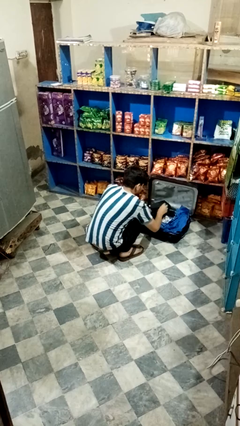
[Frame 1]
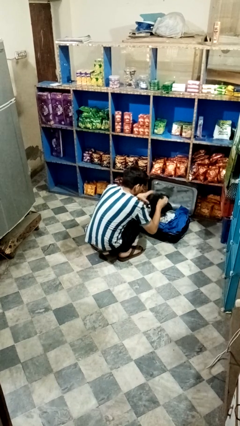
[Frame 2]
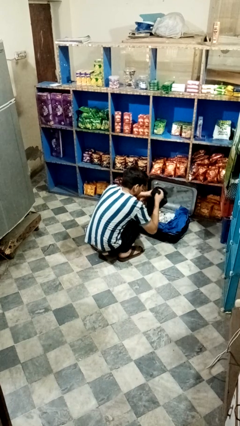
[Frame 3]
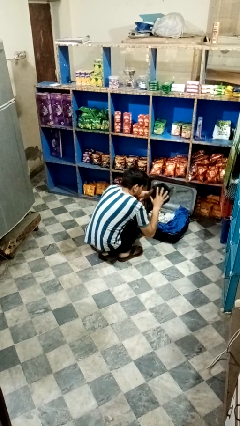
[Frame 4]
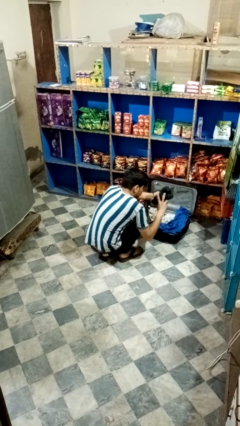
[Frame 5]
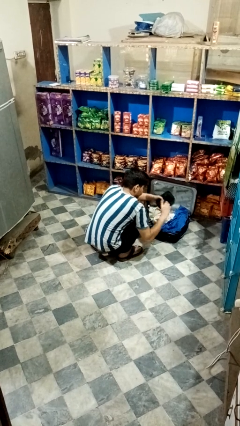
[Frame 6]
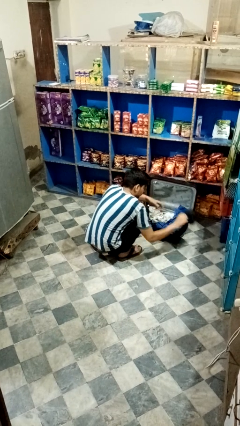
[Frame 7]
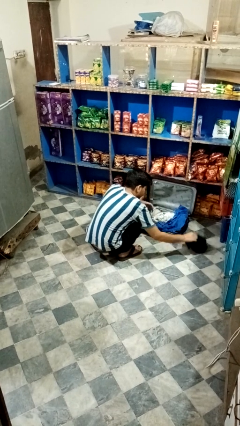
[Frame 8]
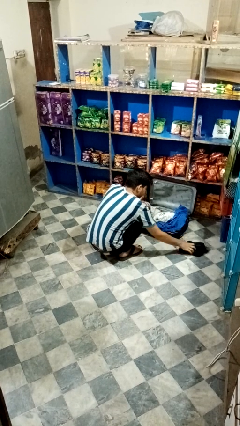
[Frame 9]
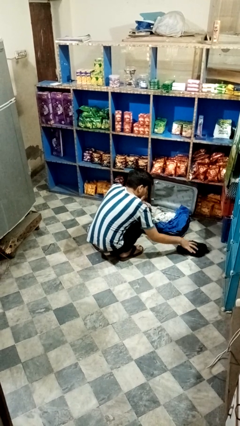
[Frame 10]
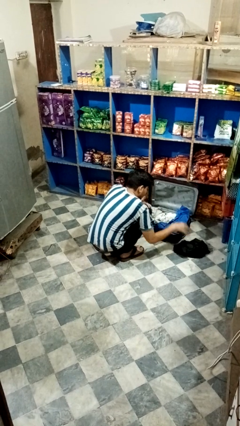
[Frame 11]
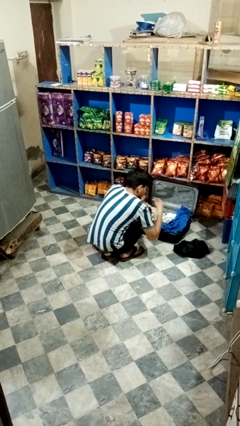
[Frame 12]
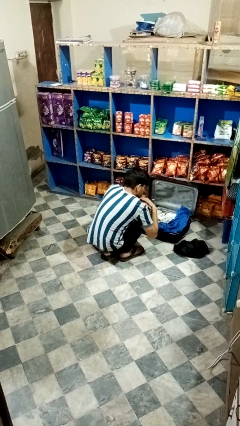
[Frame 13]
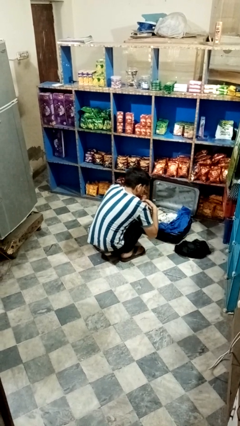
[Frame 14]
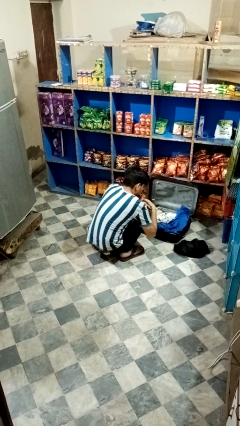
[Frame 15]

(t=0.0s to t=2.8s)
person unloads clothes from suitcase

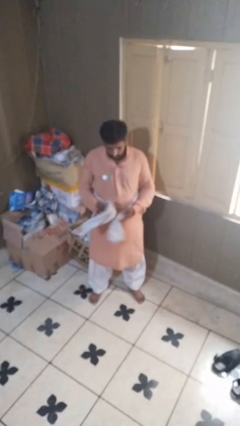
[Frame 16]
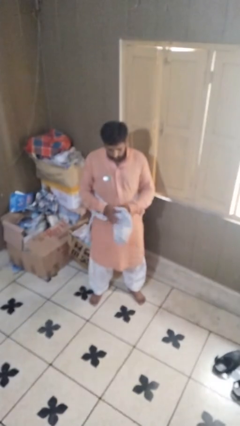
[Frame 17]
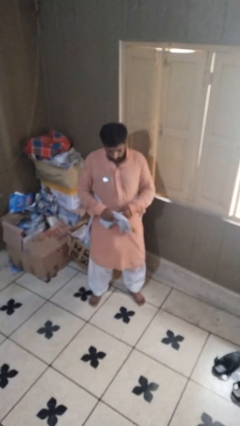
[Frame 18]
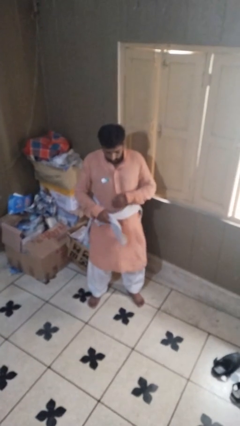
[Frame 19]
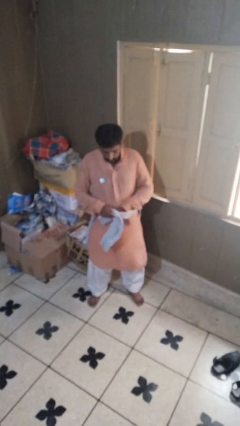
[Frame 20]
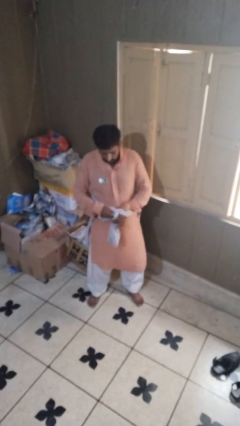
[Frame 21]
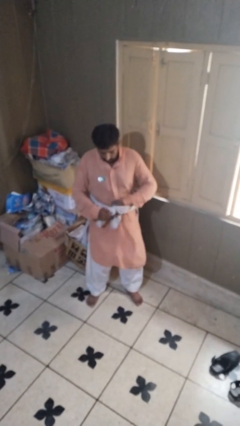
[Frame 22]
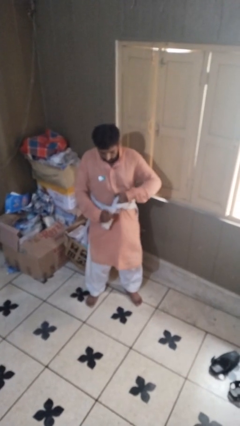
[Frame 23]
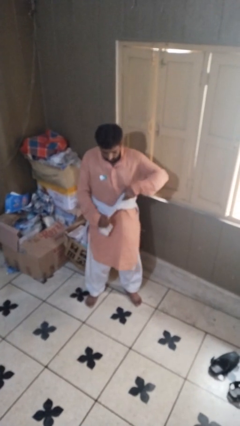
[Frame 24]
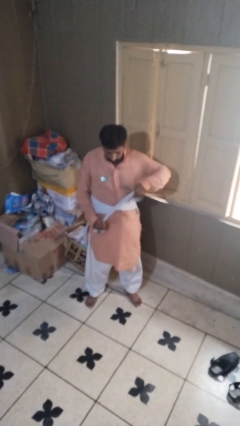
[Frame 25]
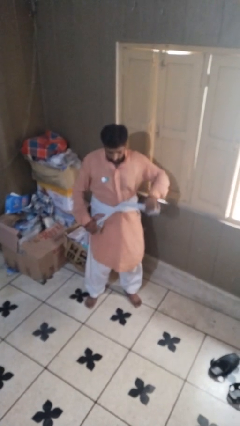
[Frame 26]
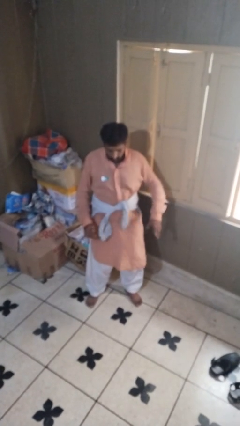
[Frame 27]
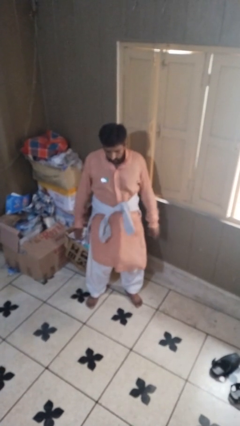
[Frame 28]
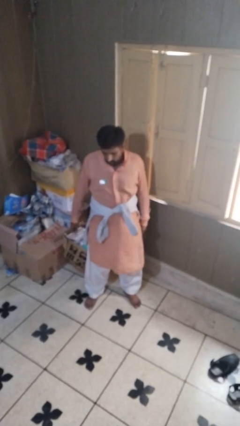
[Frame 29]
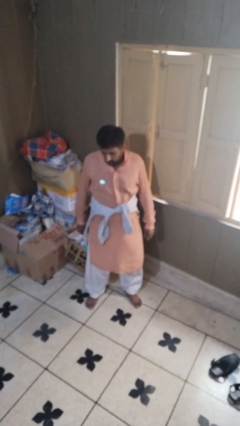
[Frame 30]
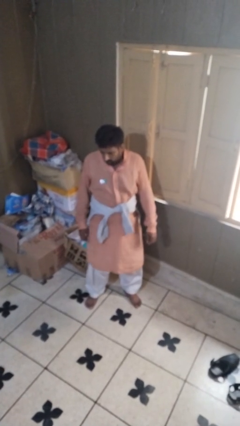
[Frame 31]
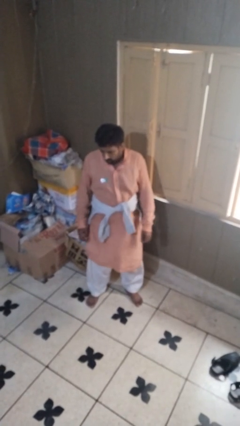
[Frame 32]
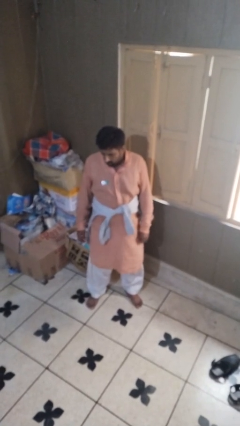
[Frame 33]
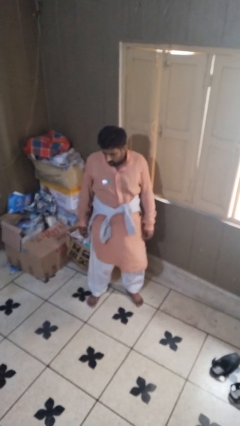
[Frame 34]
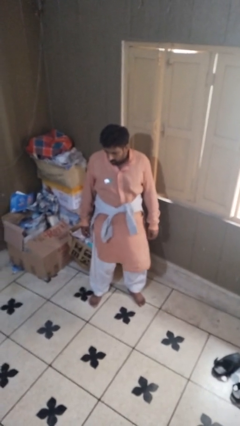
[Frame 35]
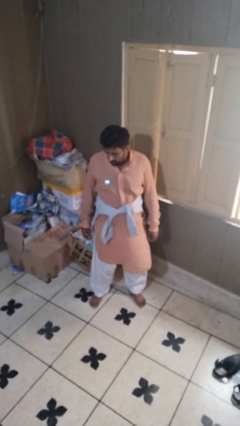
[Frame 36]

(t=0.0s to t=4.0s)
person ties jacket around waist

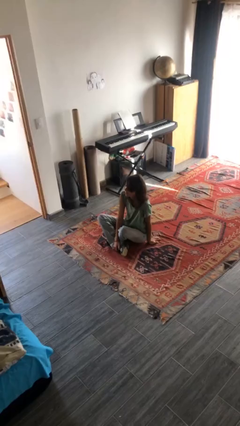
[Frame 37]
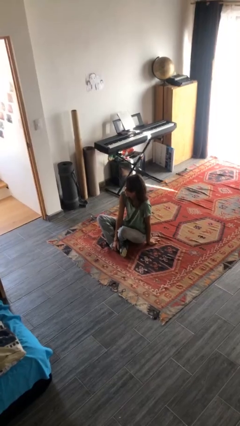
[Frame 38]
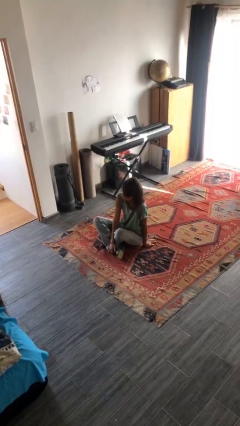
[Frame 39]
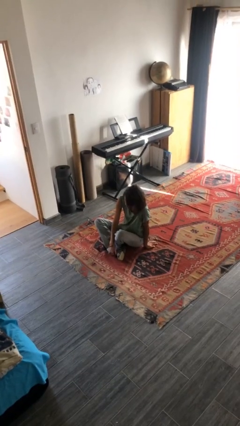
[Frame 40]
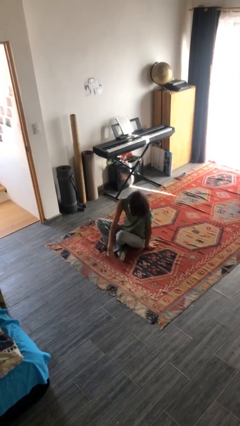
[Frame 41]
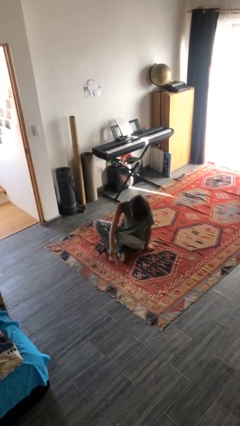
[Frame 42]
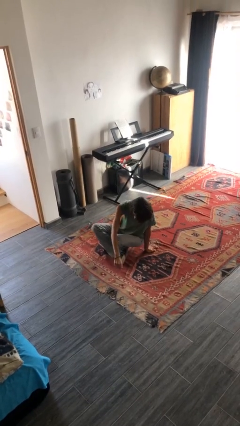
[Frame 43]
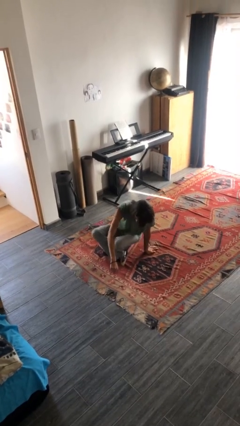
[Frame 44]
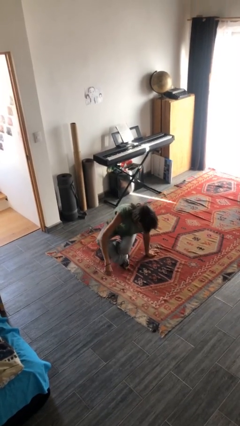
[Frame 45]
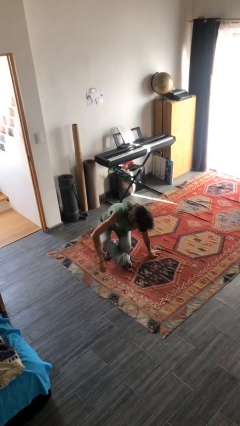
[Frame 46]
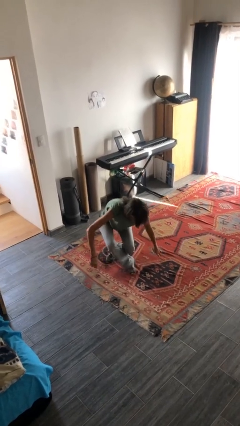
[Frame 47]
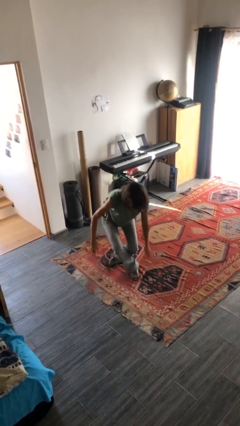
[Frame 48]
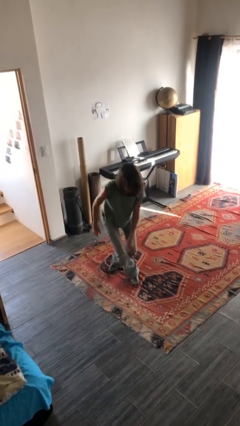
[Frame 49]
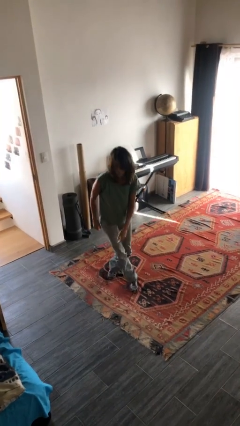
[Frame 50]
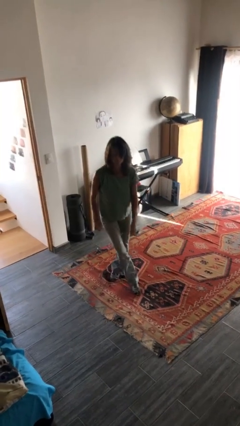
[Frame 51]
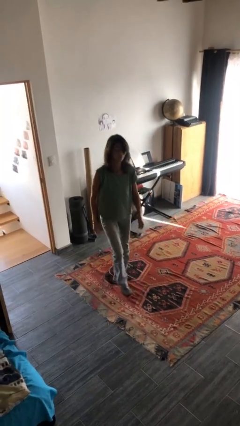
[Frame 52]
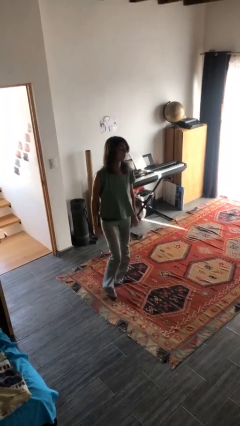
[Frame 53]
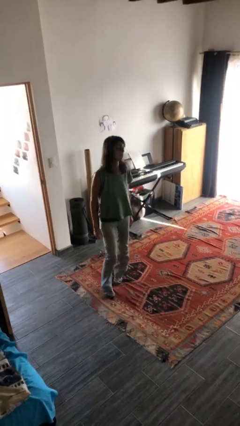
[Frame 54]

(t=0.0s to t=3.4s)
person stands up from floor

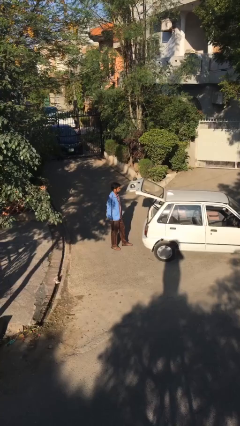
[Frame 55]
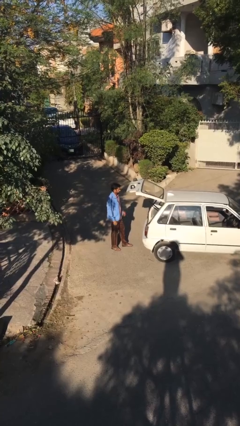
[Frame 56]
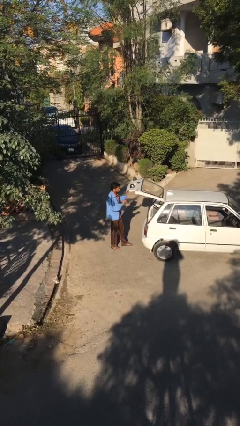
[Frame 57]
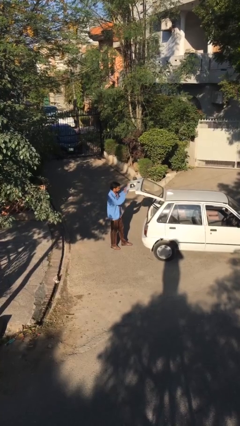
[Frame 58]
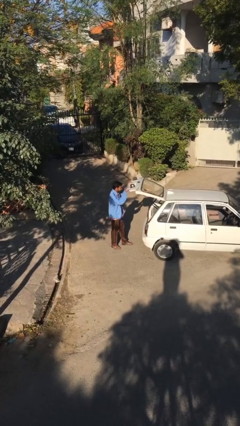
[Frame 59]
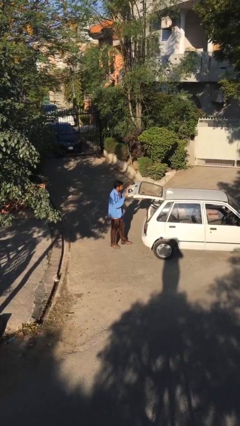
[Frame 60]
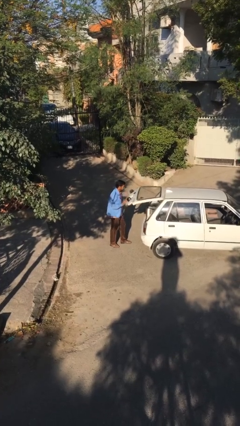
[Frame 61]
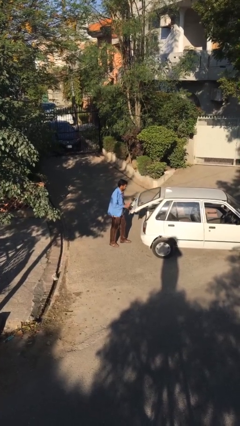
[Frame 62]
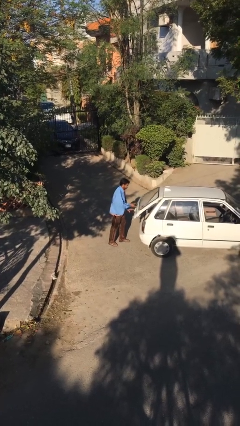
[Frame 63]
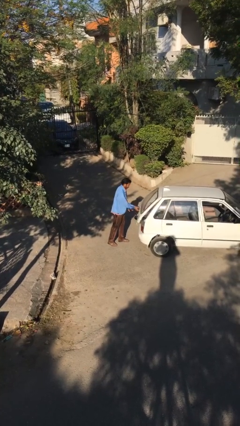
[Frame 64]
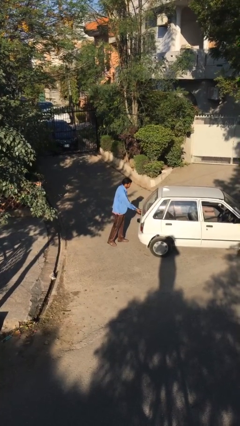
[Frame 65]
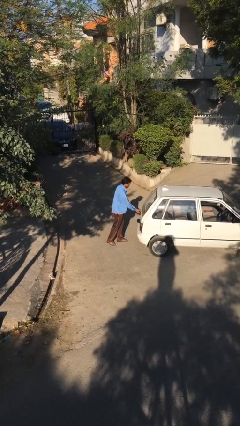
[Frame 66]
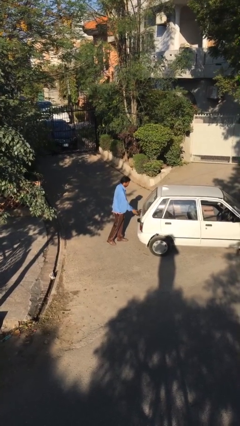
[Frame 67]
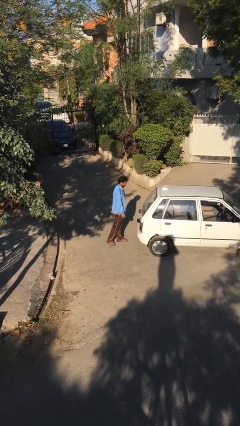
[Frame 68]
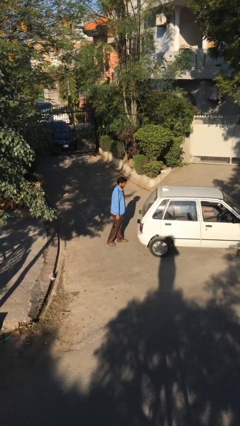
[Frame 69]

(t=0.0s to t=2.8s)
person closes car trunk

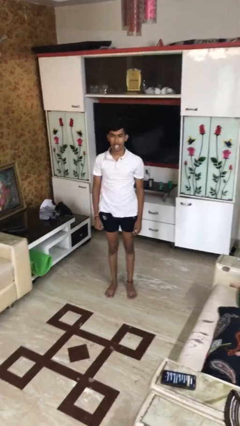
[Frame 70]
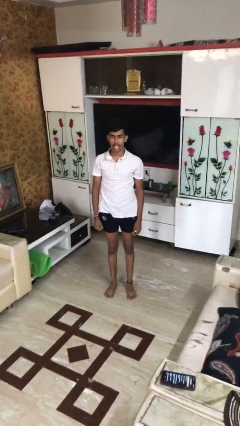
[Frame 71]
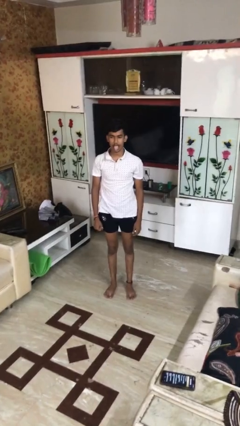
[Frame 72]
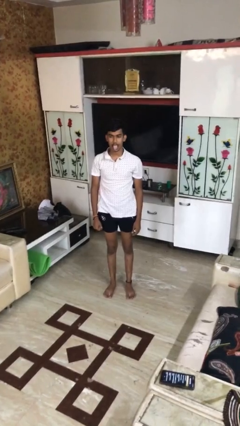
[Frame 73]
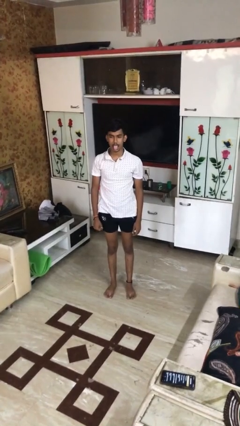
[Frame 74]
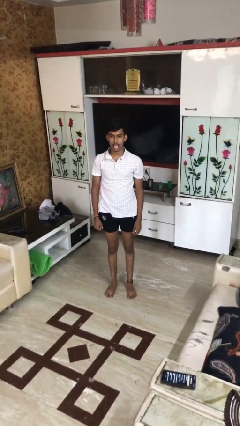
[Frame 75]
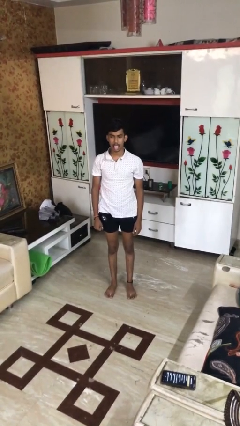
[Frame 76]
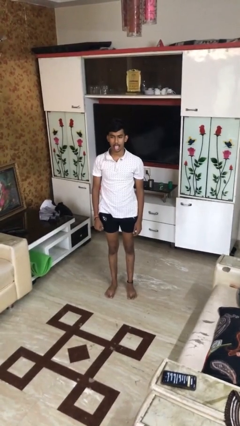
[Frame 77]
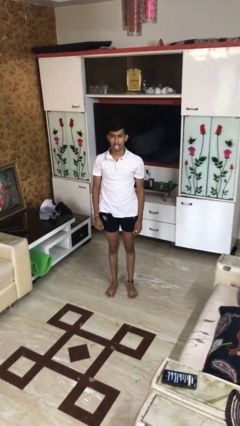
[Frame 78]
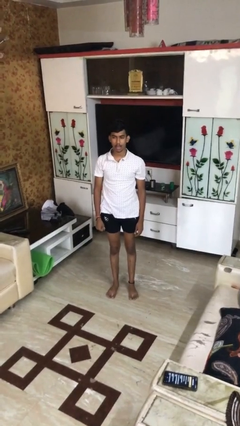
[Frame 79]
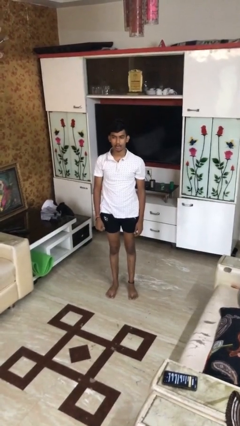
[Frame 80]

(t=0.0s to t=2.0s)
person sticks out tongue

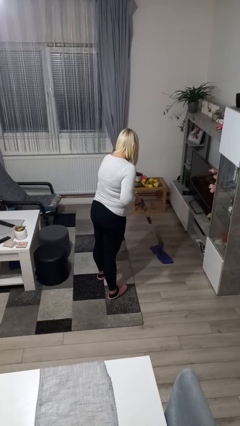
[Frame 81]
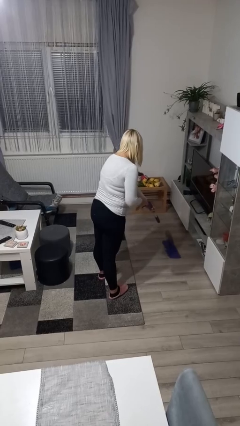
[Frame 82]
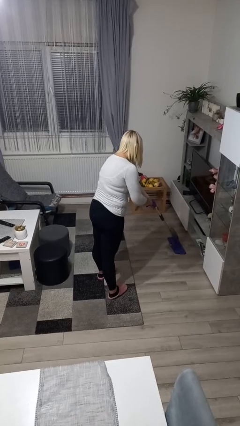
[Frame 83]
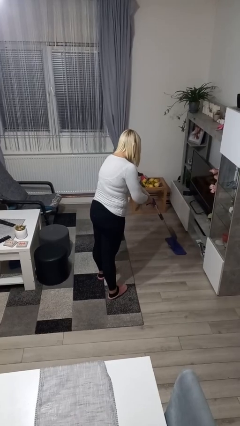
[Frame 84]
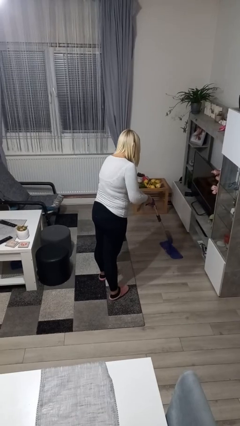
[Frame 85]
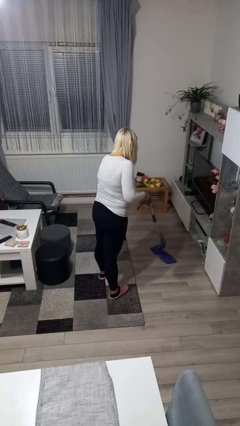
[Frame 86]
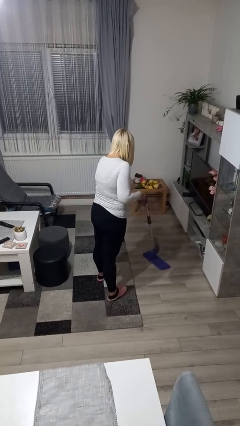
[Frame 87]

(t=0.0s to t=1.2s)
person mops

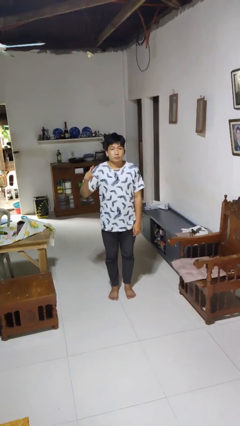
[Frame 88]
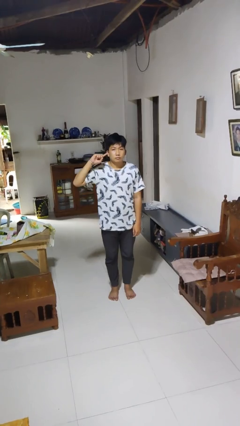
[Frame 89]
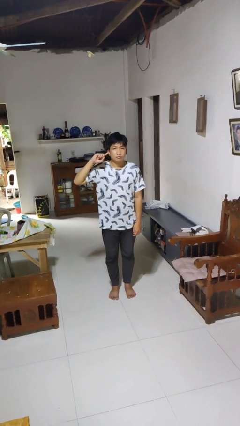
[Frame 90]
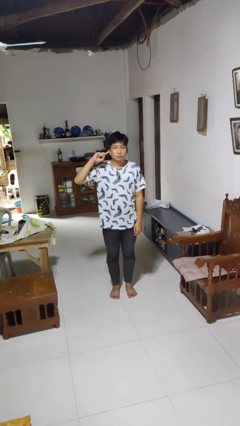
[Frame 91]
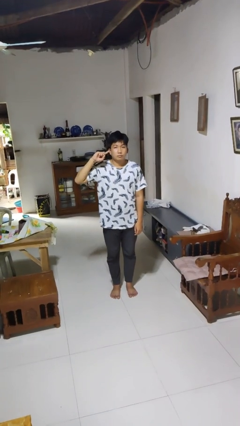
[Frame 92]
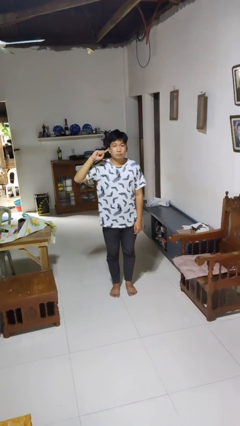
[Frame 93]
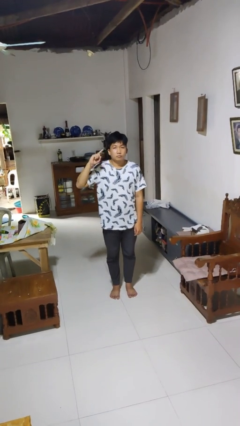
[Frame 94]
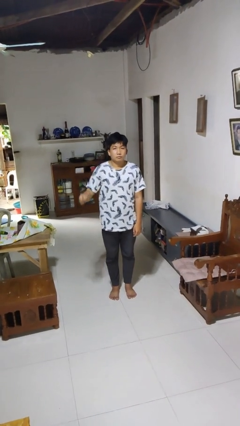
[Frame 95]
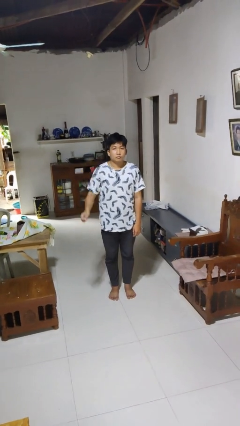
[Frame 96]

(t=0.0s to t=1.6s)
person gestures listen closely
